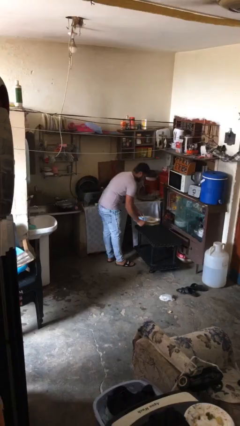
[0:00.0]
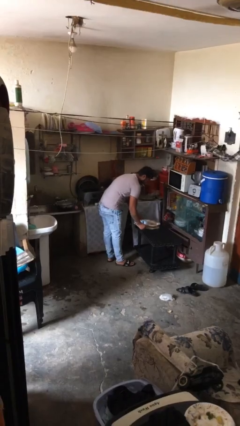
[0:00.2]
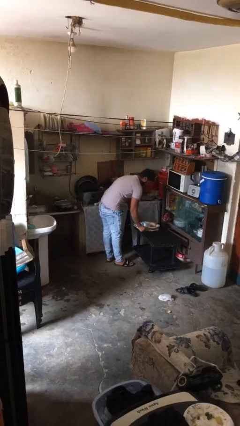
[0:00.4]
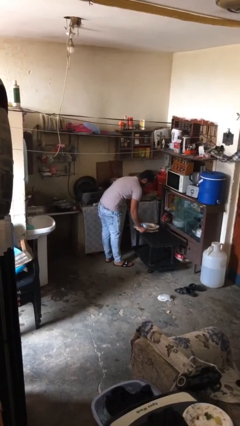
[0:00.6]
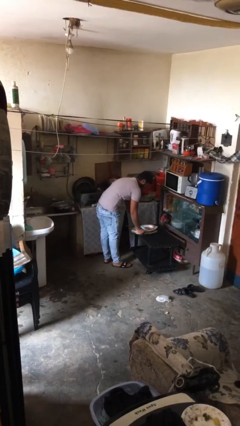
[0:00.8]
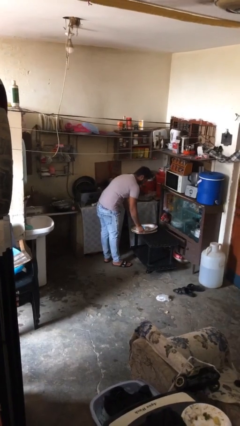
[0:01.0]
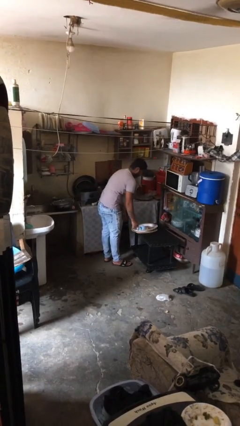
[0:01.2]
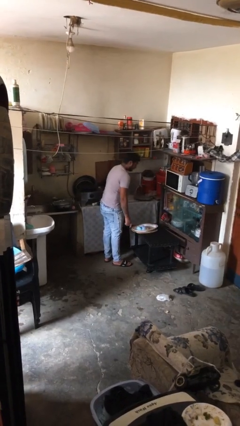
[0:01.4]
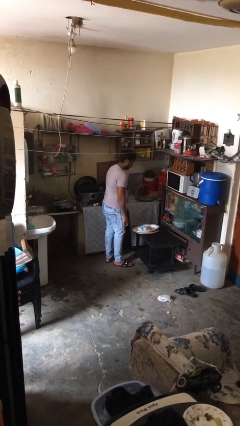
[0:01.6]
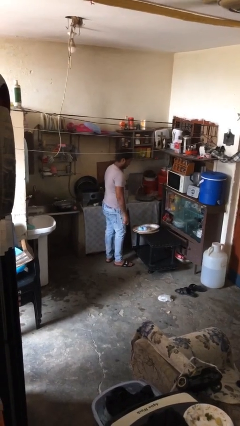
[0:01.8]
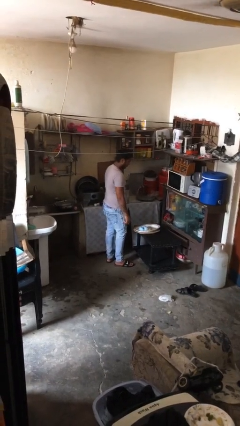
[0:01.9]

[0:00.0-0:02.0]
person puts down object on table

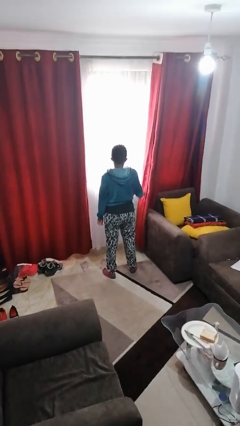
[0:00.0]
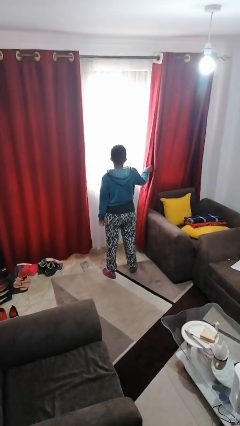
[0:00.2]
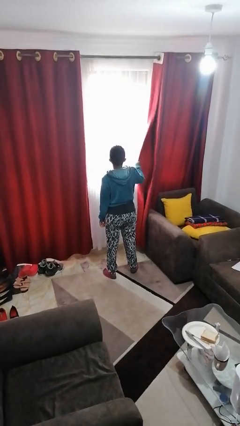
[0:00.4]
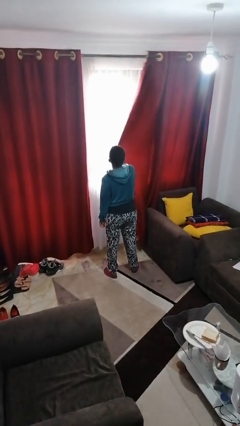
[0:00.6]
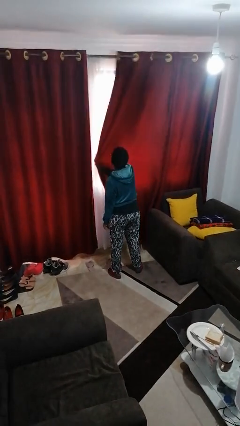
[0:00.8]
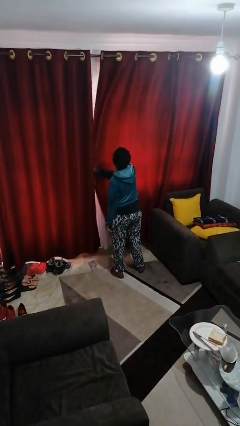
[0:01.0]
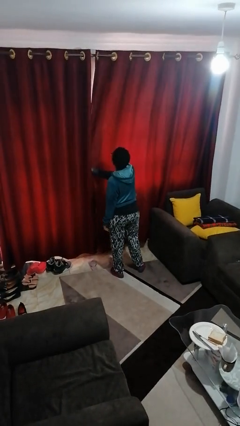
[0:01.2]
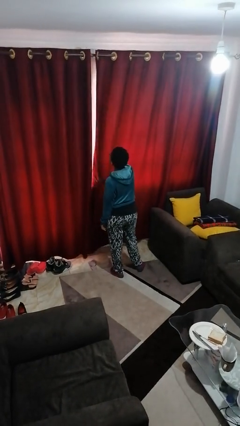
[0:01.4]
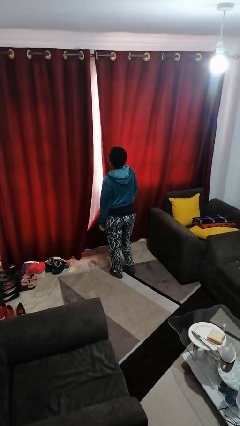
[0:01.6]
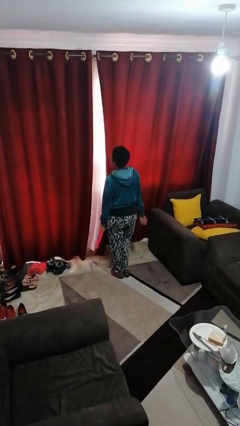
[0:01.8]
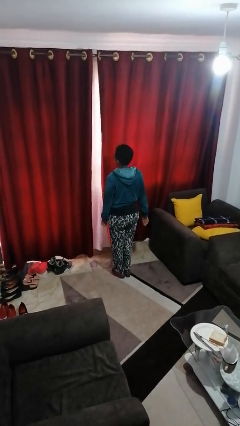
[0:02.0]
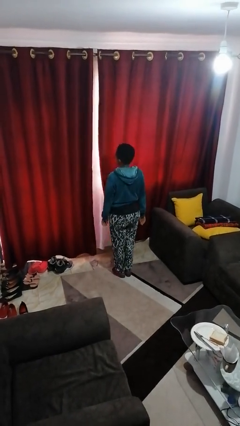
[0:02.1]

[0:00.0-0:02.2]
person closes curtains

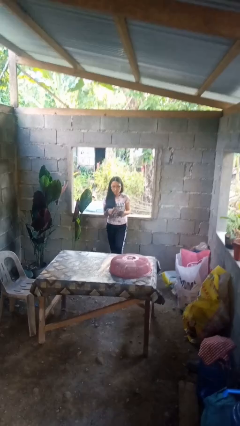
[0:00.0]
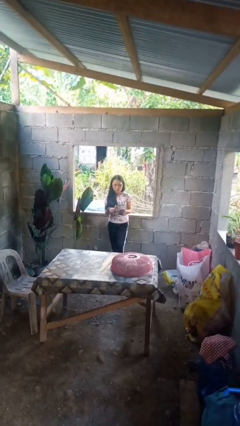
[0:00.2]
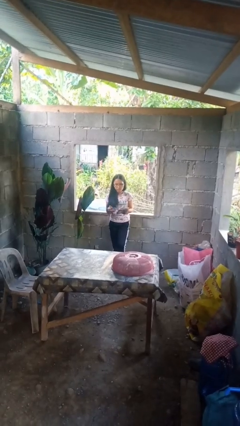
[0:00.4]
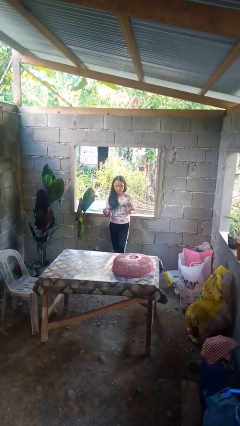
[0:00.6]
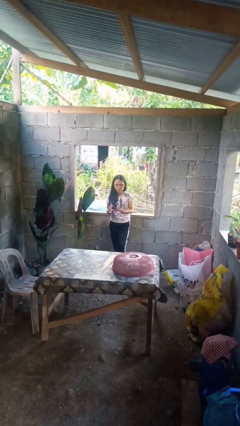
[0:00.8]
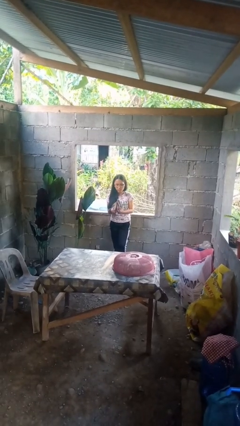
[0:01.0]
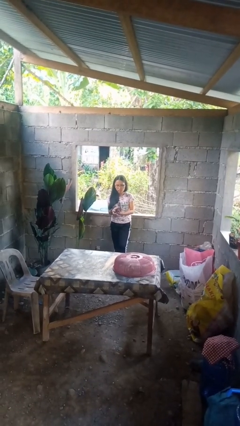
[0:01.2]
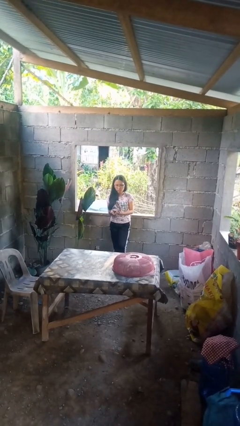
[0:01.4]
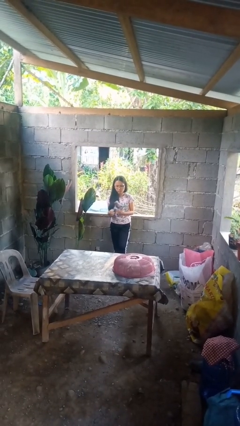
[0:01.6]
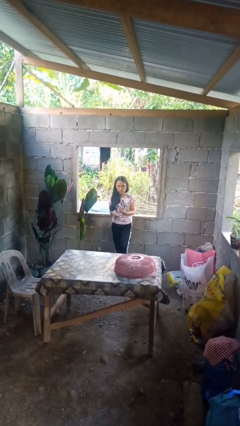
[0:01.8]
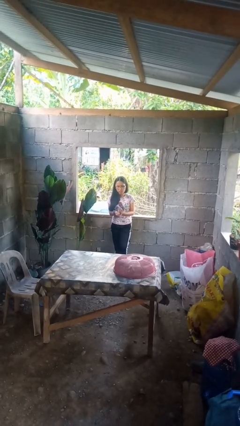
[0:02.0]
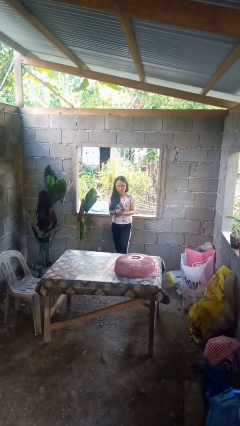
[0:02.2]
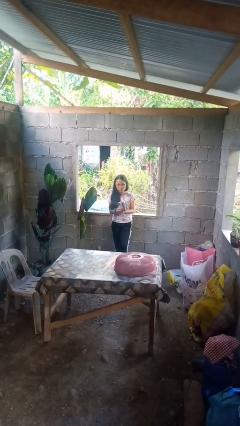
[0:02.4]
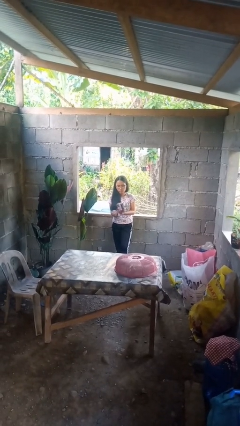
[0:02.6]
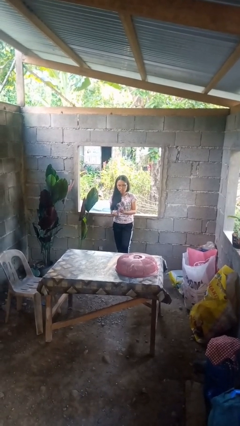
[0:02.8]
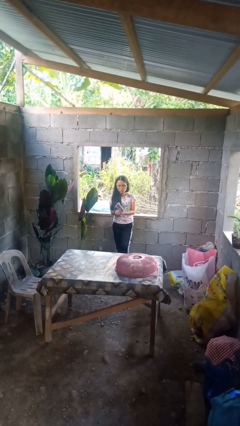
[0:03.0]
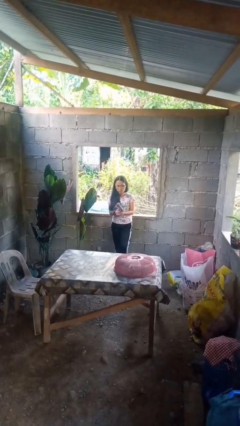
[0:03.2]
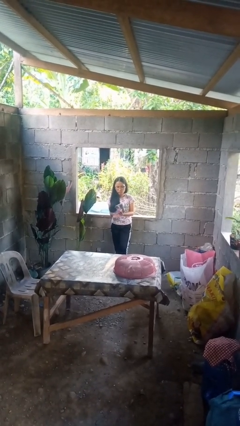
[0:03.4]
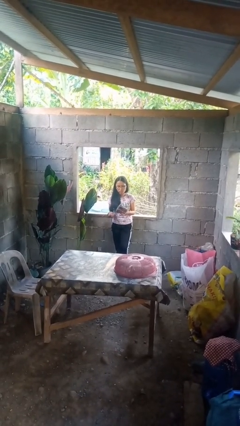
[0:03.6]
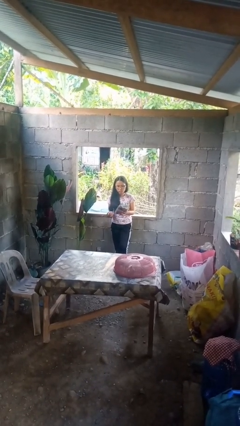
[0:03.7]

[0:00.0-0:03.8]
person crumples paper

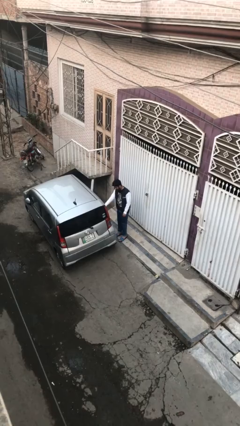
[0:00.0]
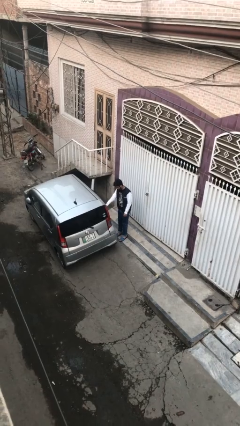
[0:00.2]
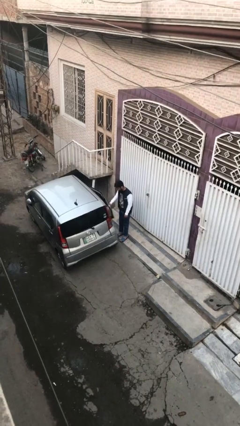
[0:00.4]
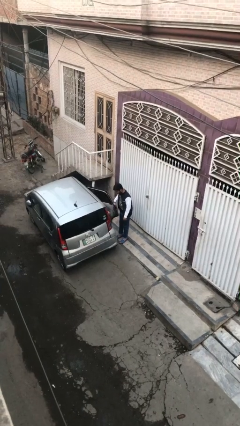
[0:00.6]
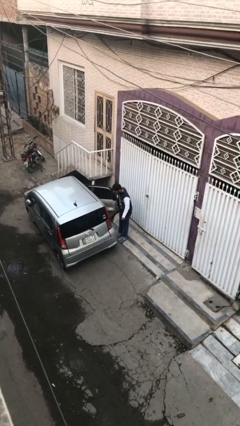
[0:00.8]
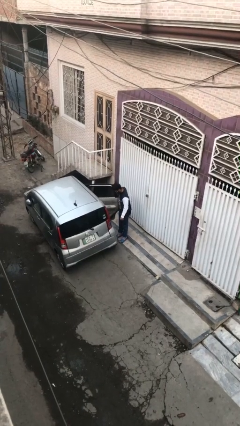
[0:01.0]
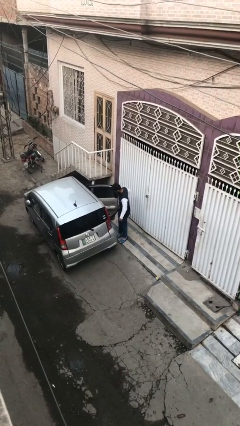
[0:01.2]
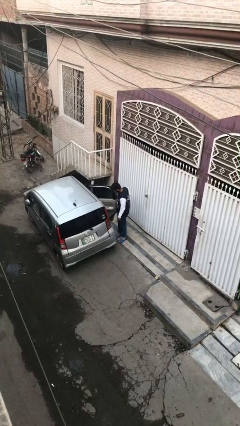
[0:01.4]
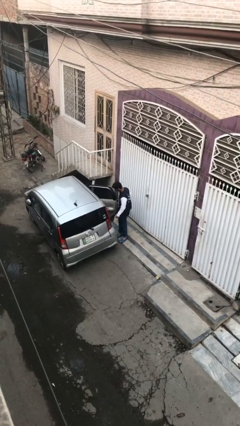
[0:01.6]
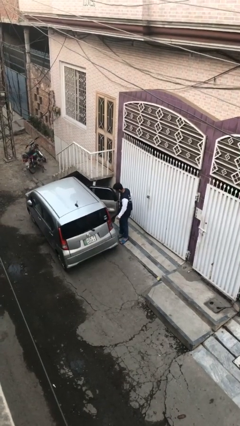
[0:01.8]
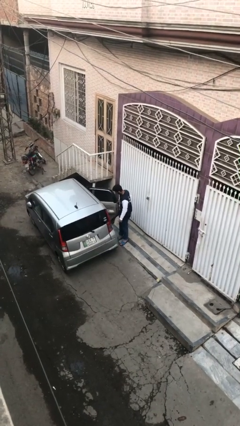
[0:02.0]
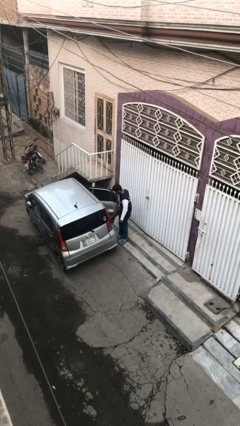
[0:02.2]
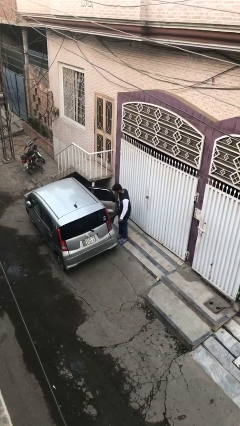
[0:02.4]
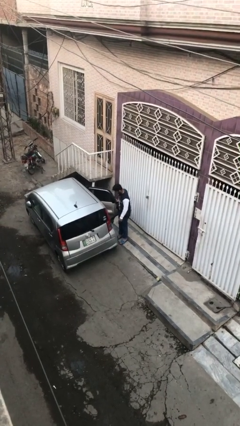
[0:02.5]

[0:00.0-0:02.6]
person opens car door

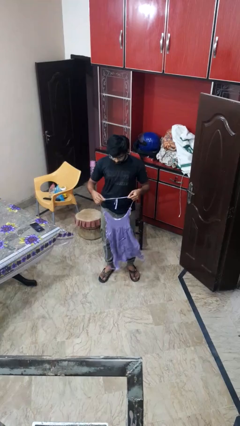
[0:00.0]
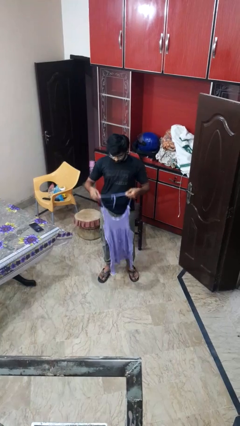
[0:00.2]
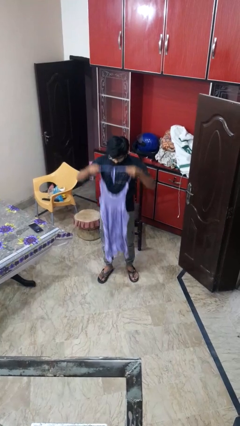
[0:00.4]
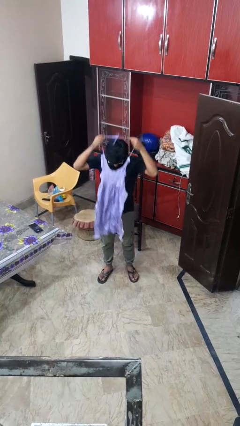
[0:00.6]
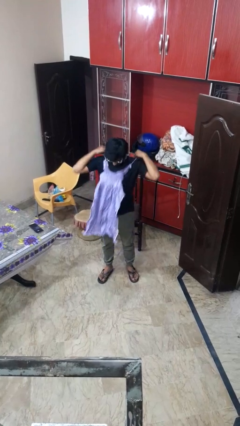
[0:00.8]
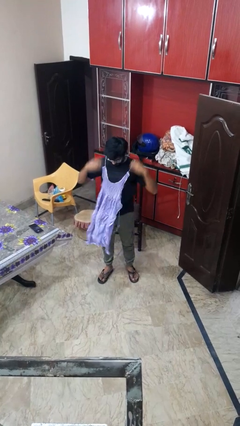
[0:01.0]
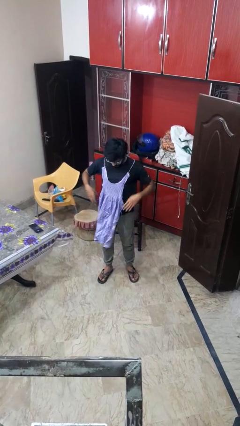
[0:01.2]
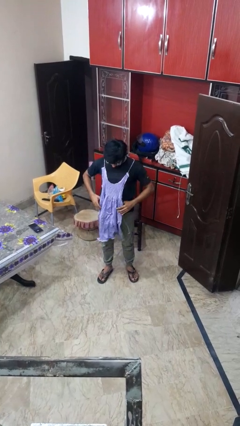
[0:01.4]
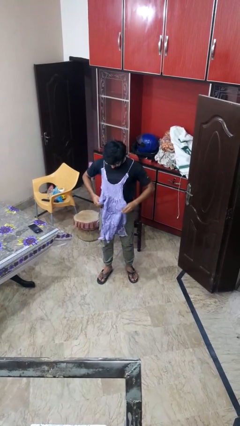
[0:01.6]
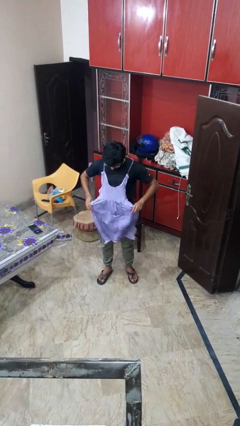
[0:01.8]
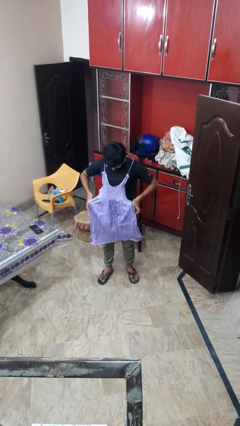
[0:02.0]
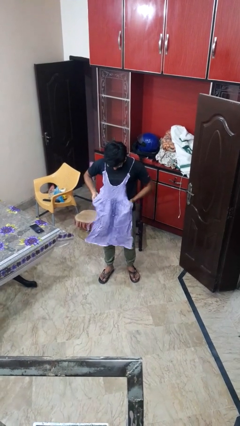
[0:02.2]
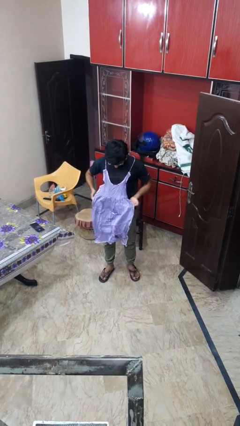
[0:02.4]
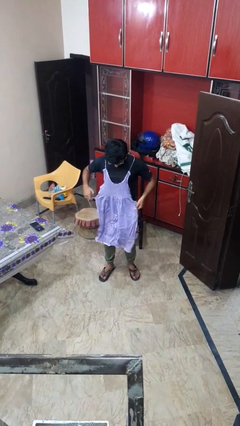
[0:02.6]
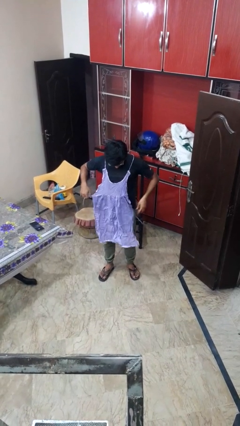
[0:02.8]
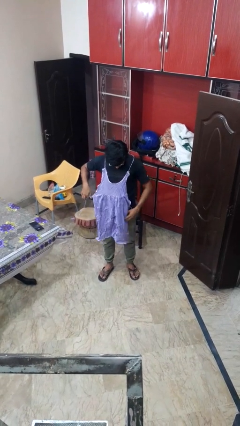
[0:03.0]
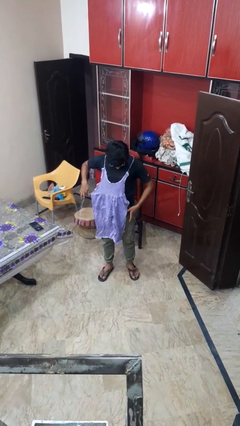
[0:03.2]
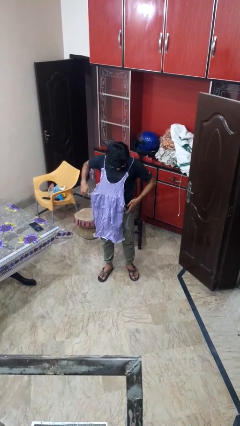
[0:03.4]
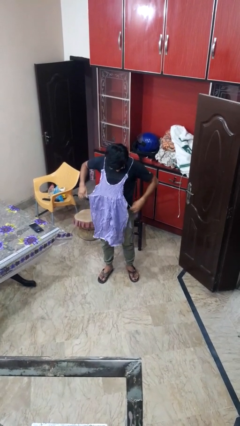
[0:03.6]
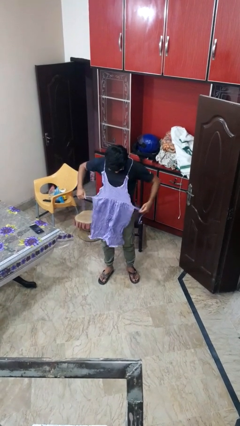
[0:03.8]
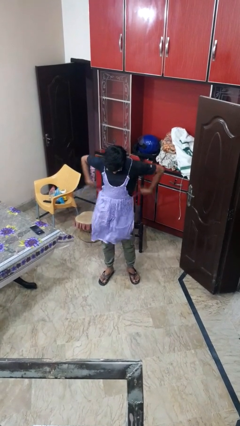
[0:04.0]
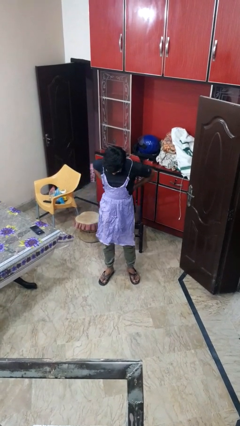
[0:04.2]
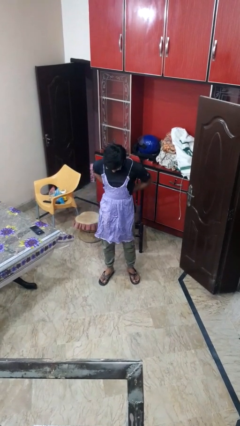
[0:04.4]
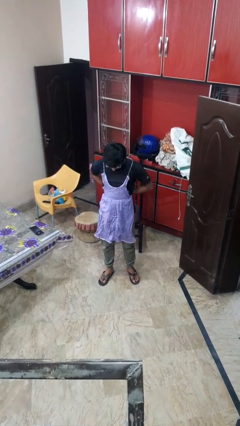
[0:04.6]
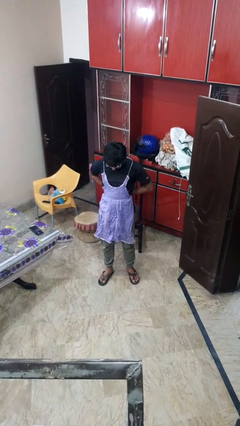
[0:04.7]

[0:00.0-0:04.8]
person puts on apron

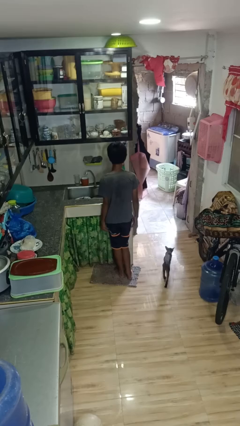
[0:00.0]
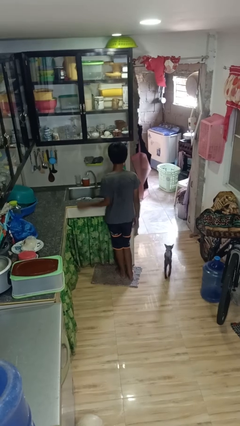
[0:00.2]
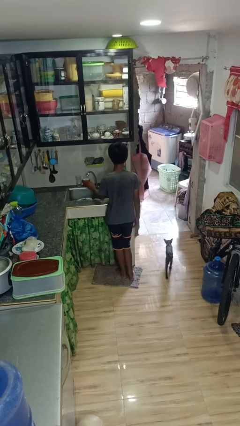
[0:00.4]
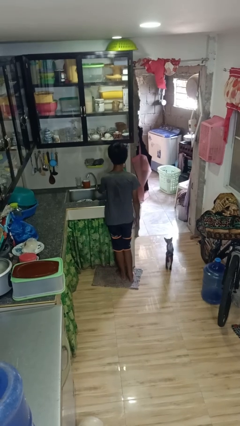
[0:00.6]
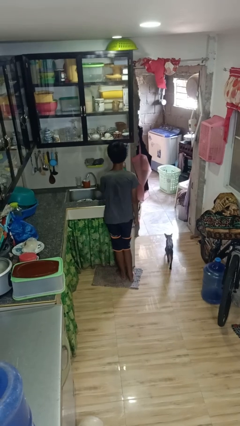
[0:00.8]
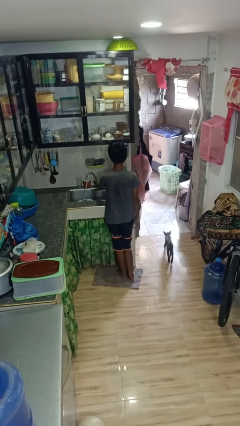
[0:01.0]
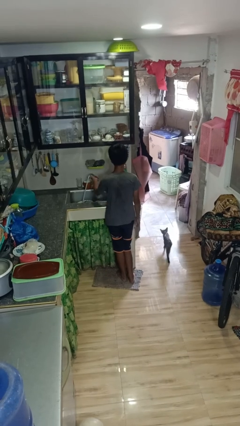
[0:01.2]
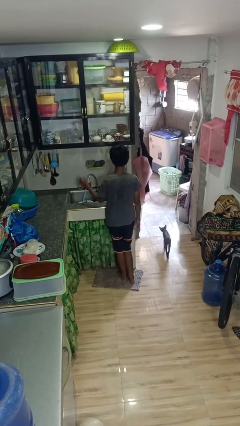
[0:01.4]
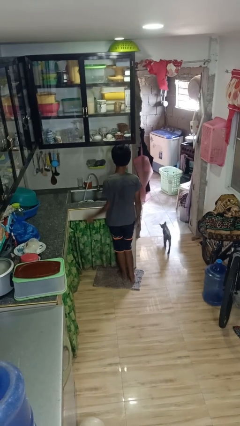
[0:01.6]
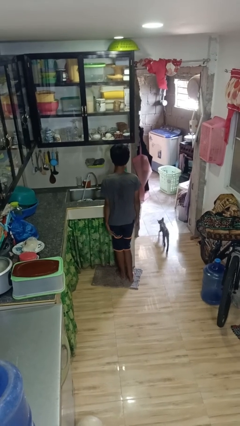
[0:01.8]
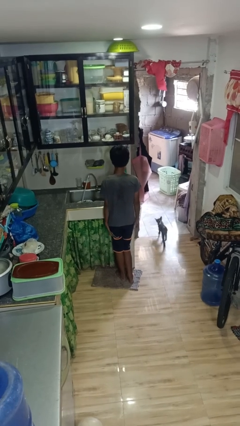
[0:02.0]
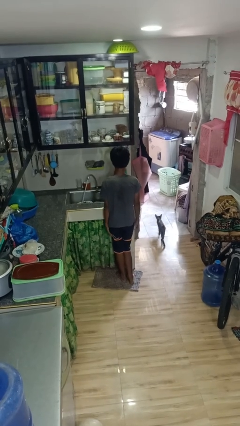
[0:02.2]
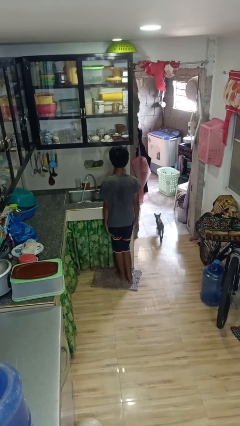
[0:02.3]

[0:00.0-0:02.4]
person turns on faucet
